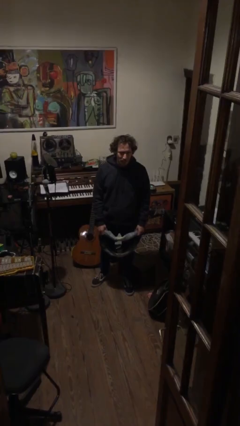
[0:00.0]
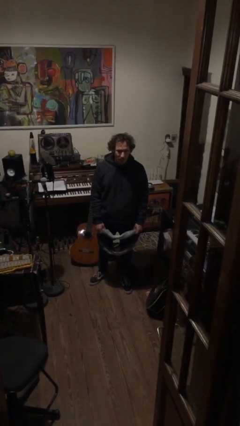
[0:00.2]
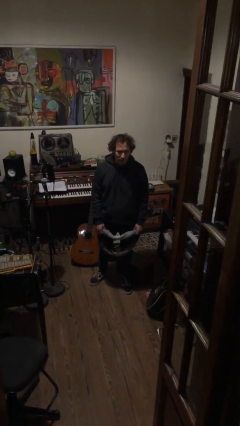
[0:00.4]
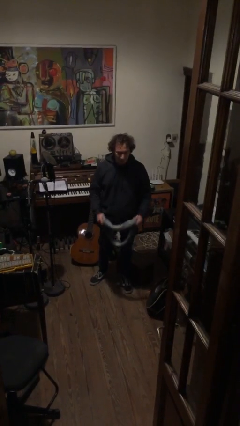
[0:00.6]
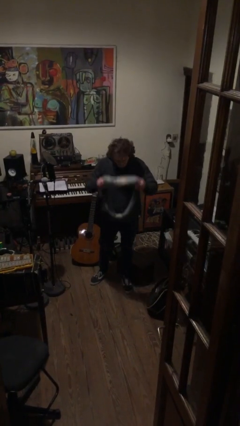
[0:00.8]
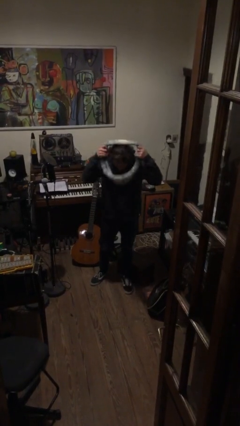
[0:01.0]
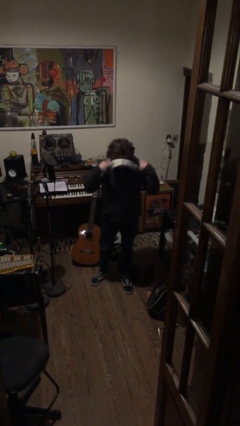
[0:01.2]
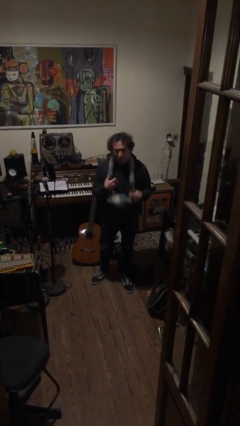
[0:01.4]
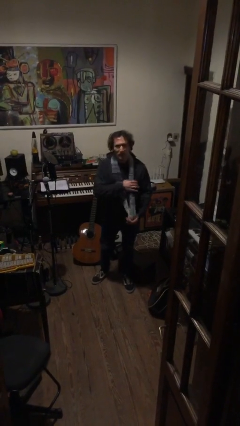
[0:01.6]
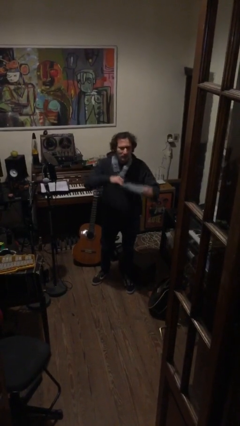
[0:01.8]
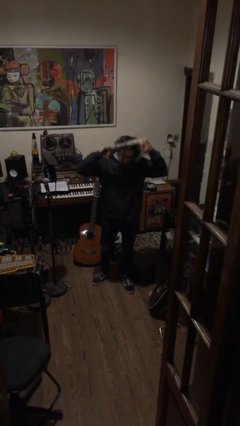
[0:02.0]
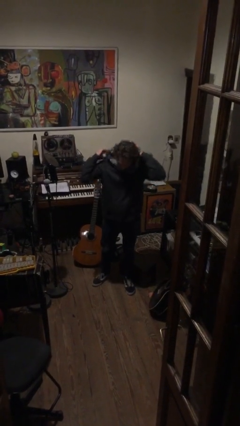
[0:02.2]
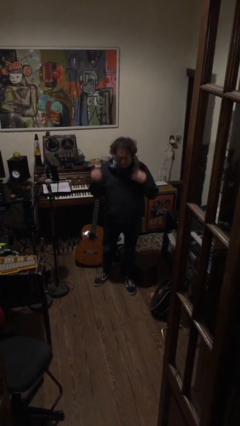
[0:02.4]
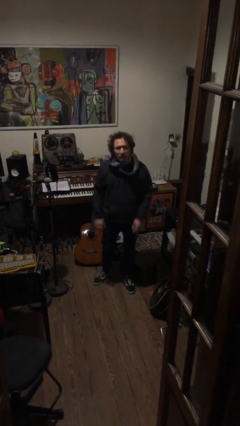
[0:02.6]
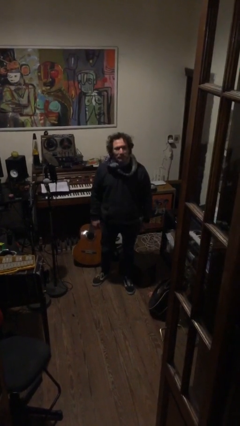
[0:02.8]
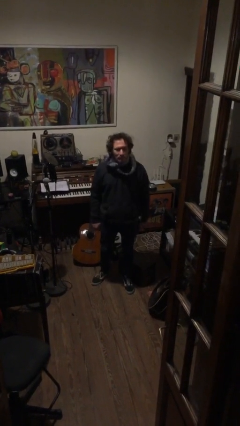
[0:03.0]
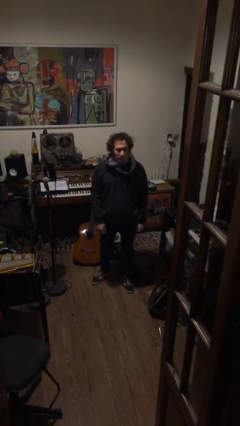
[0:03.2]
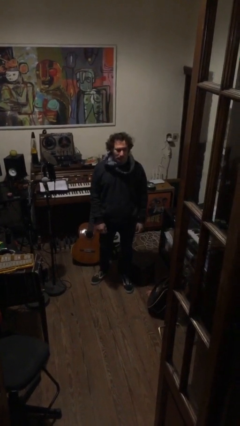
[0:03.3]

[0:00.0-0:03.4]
person puts on scarf

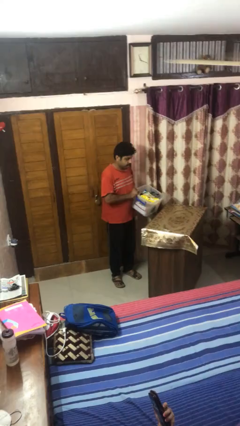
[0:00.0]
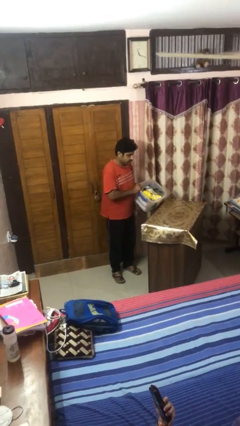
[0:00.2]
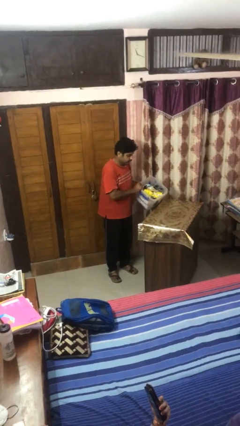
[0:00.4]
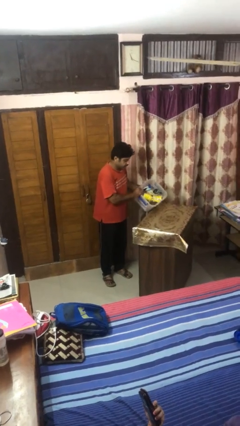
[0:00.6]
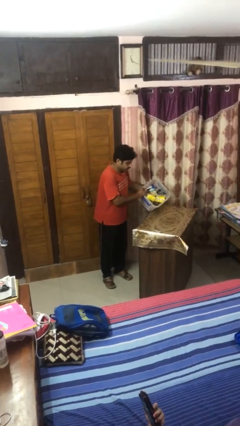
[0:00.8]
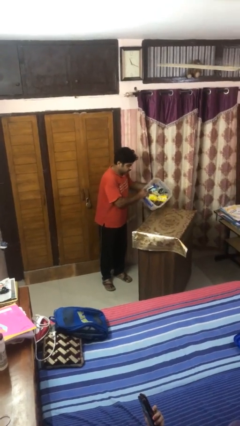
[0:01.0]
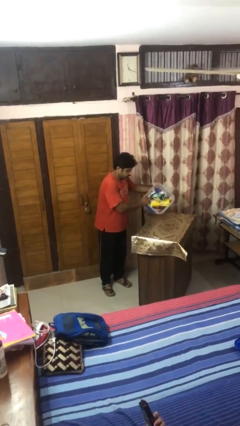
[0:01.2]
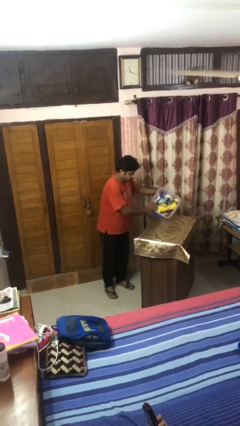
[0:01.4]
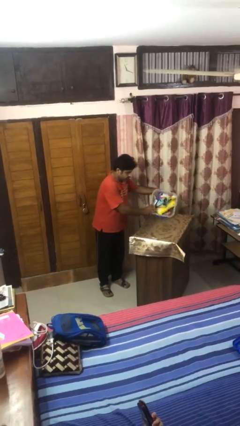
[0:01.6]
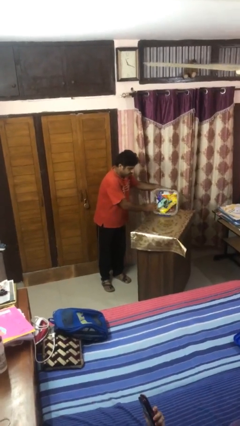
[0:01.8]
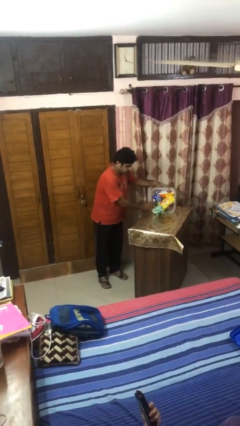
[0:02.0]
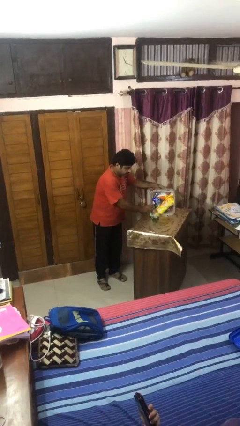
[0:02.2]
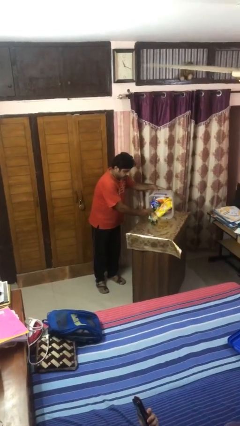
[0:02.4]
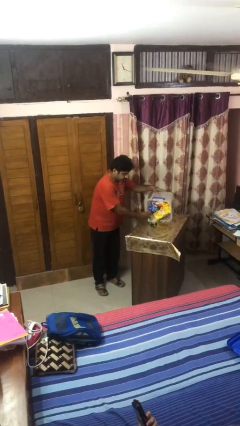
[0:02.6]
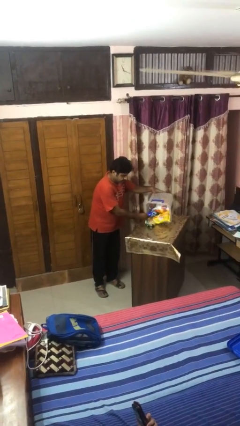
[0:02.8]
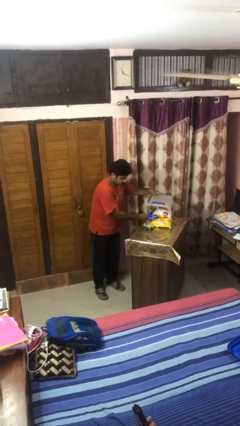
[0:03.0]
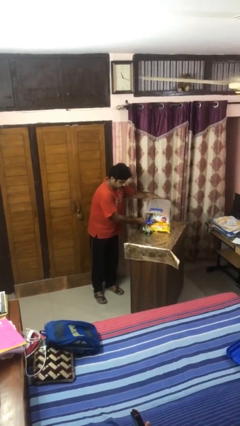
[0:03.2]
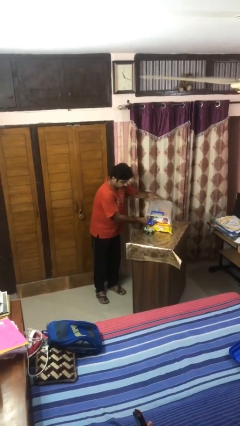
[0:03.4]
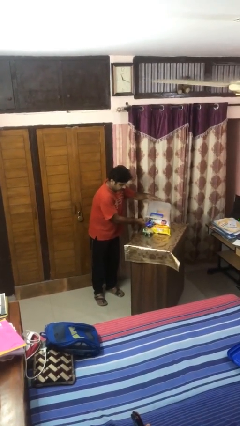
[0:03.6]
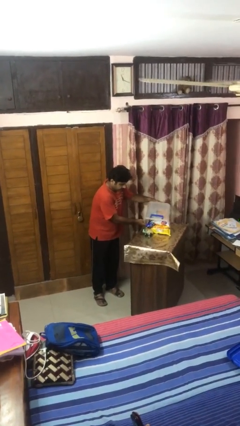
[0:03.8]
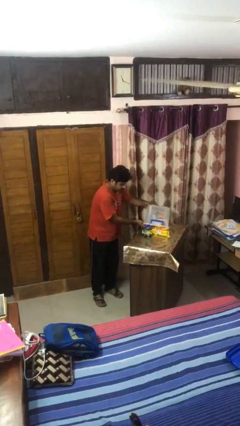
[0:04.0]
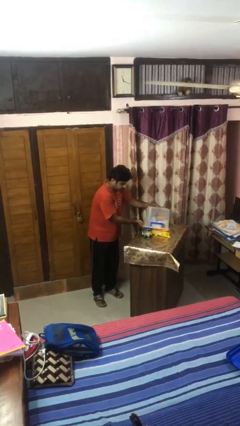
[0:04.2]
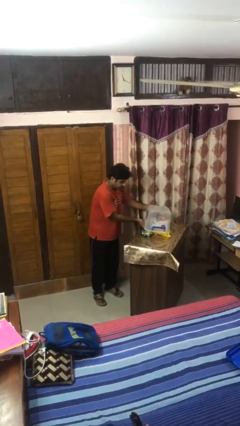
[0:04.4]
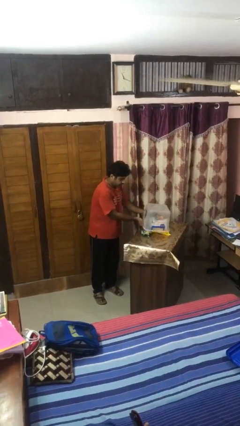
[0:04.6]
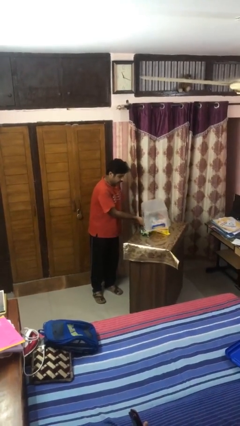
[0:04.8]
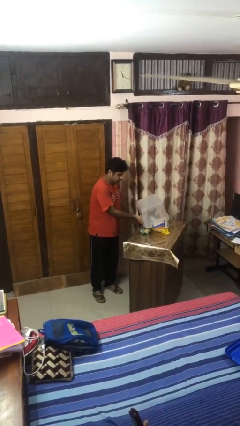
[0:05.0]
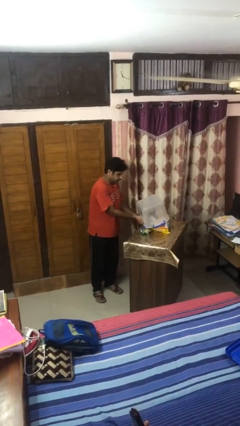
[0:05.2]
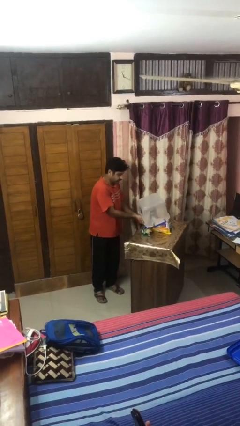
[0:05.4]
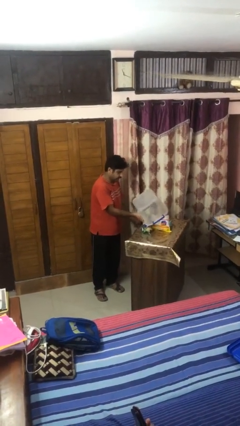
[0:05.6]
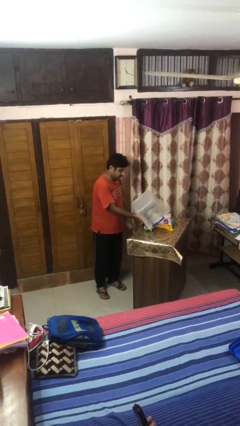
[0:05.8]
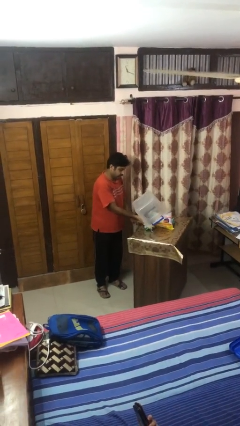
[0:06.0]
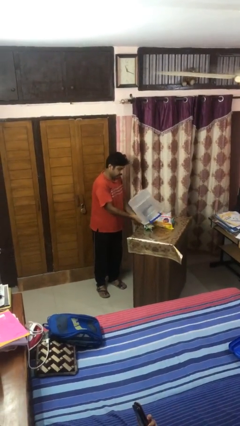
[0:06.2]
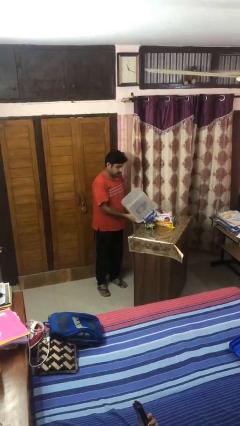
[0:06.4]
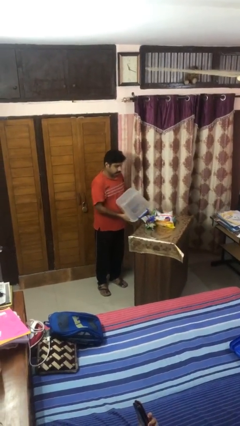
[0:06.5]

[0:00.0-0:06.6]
person unloads box onto table

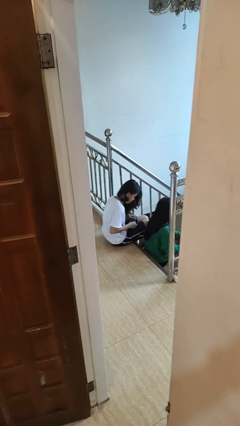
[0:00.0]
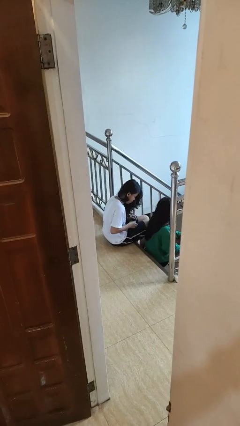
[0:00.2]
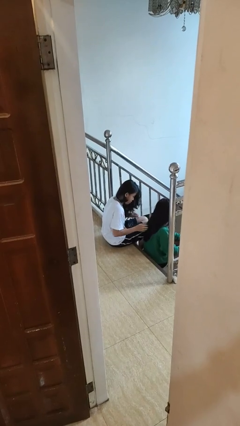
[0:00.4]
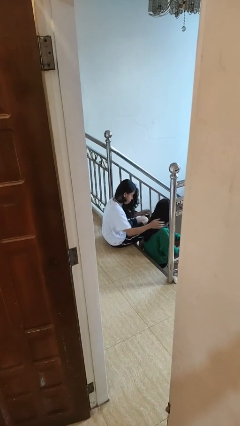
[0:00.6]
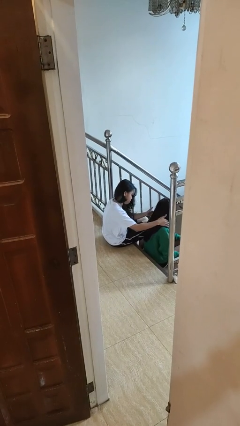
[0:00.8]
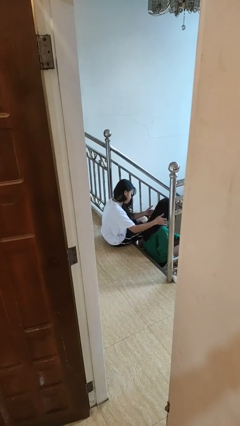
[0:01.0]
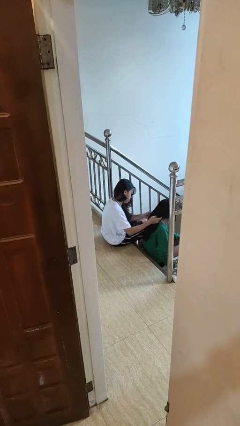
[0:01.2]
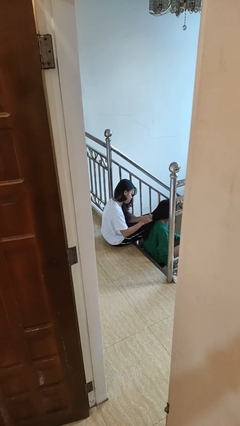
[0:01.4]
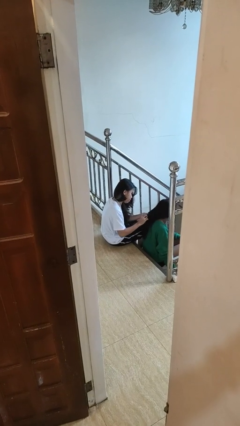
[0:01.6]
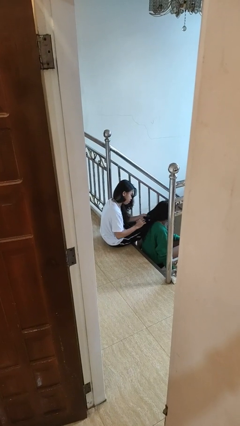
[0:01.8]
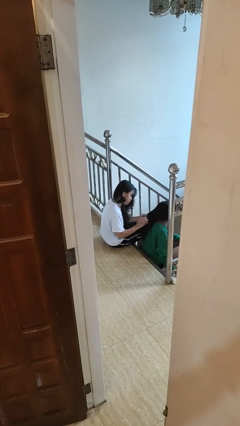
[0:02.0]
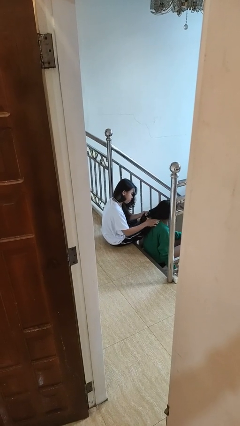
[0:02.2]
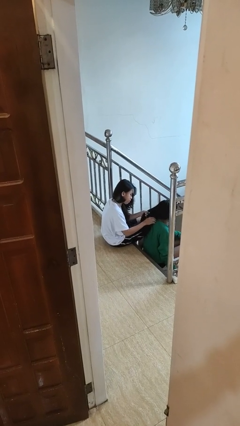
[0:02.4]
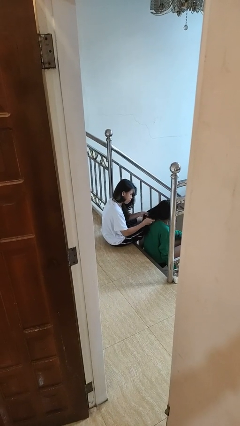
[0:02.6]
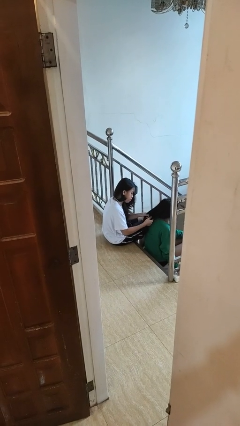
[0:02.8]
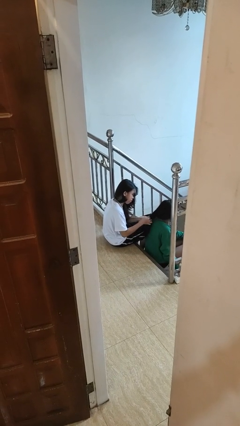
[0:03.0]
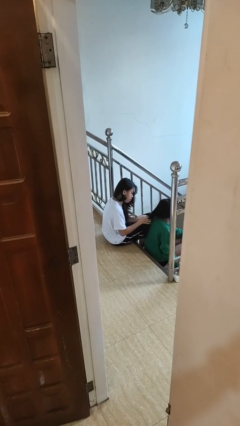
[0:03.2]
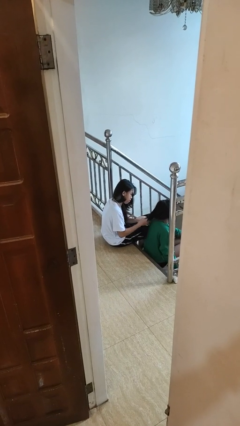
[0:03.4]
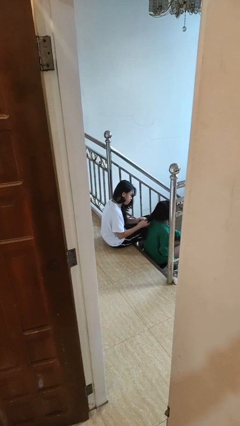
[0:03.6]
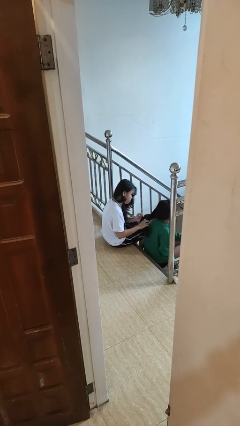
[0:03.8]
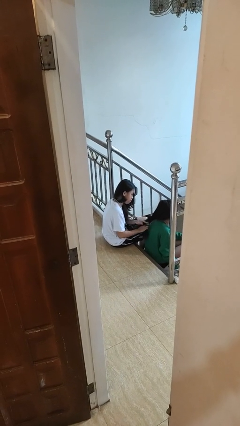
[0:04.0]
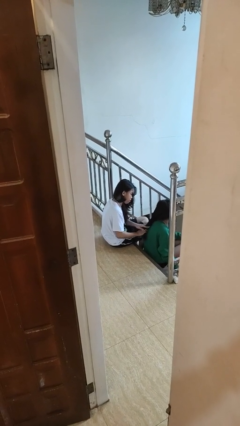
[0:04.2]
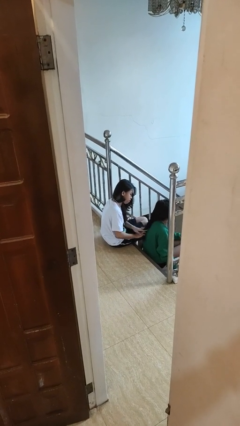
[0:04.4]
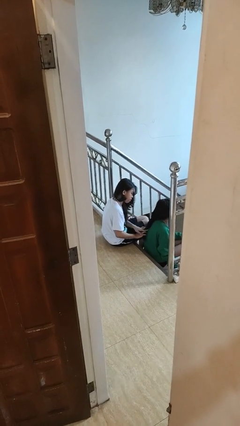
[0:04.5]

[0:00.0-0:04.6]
person braids hair of person

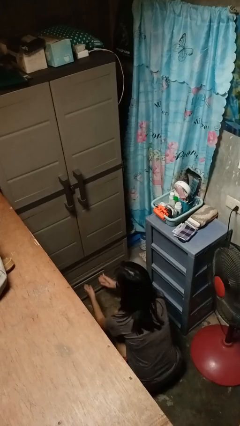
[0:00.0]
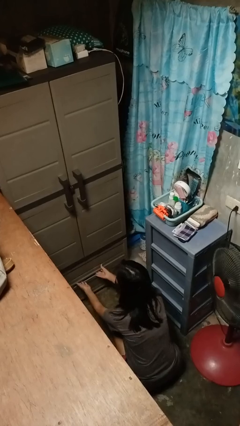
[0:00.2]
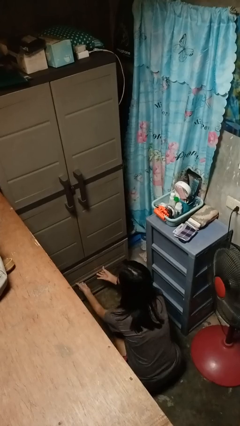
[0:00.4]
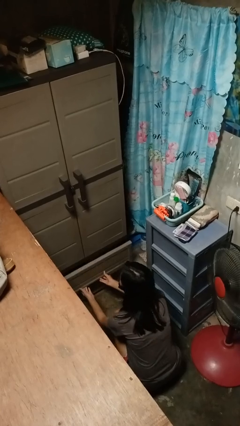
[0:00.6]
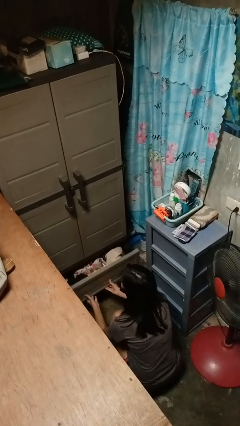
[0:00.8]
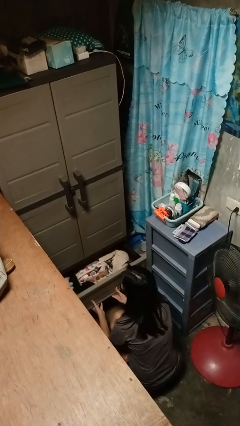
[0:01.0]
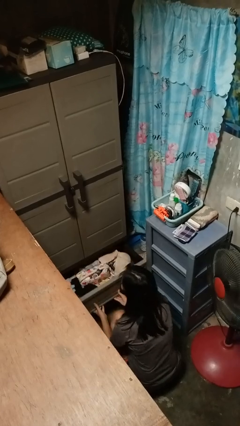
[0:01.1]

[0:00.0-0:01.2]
person opens dresser drawer

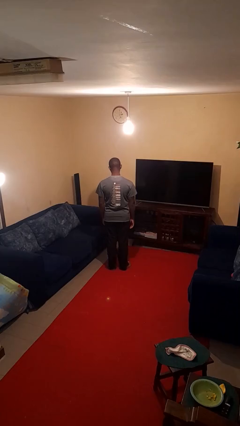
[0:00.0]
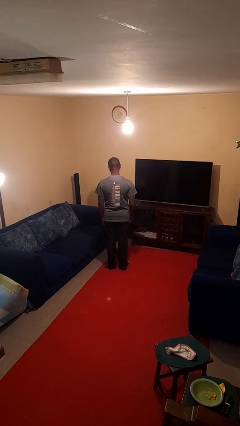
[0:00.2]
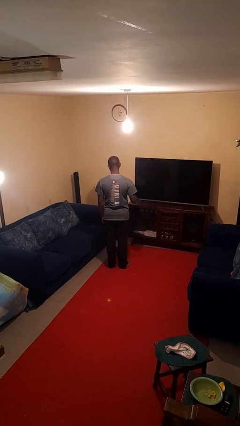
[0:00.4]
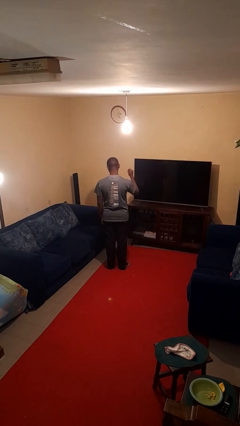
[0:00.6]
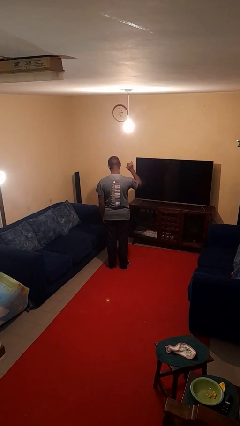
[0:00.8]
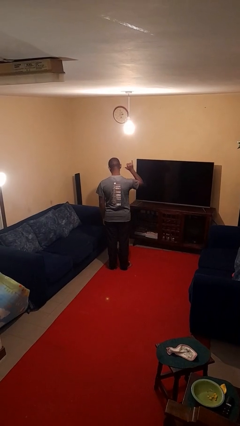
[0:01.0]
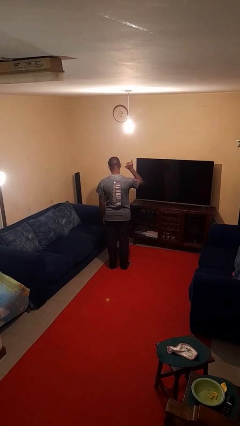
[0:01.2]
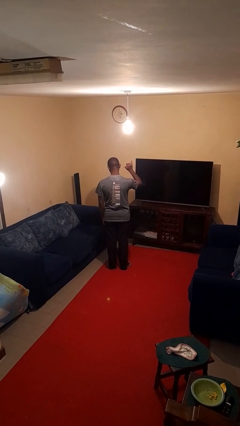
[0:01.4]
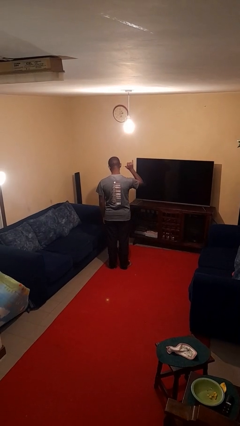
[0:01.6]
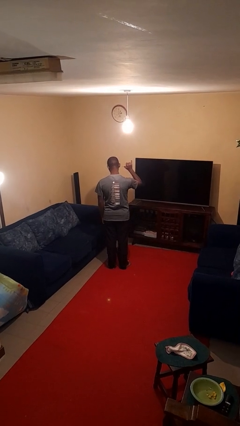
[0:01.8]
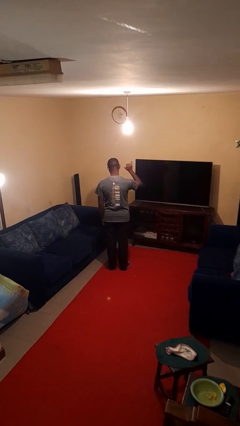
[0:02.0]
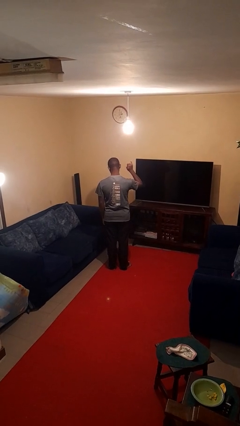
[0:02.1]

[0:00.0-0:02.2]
person gestures hang loose
